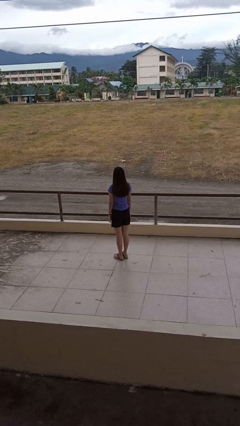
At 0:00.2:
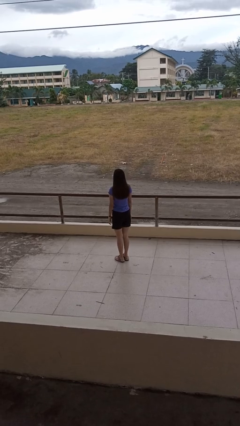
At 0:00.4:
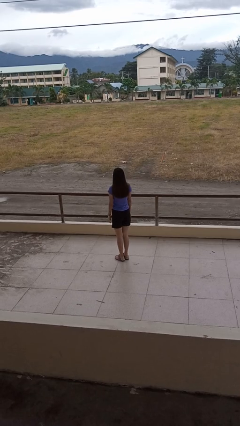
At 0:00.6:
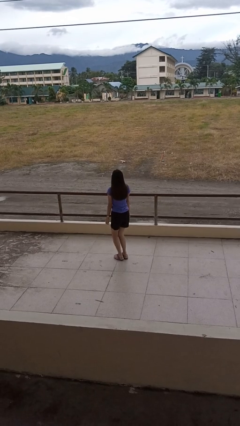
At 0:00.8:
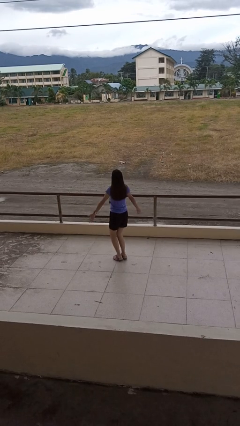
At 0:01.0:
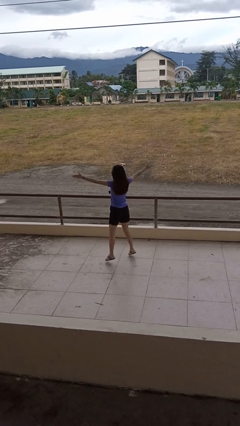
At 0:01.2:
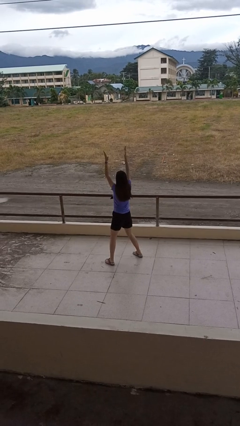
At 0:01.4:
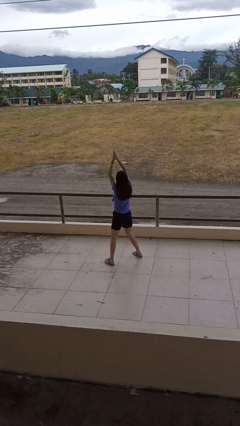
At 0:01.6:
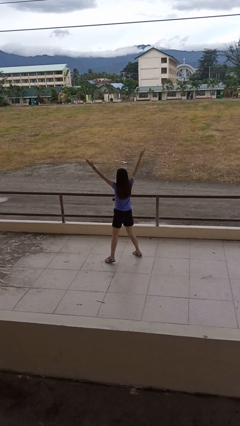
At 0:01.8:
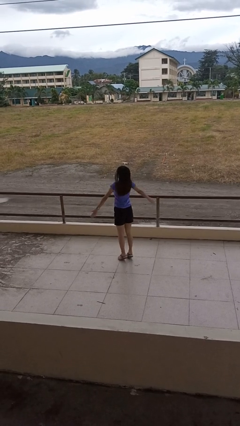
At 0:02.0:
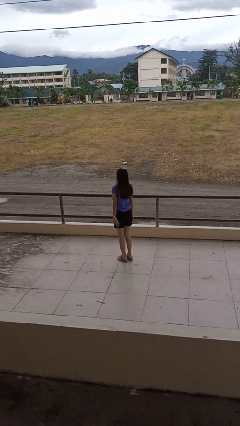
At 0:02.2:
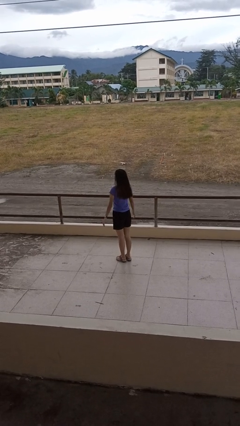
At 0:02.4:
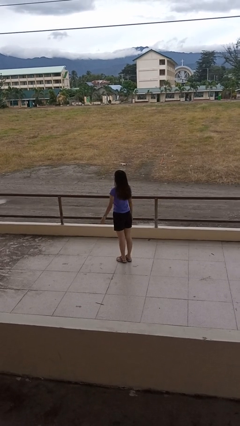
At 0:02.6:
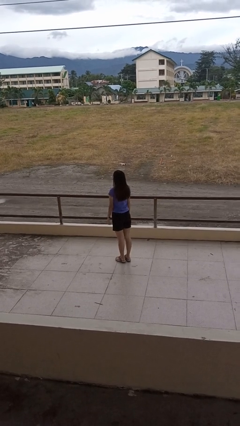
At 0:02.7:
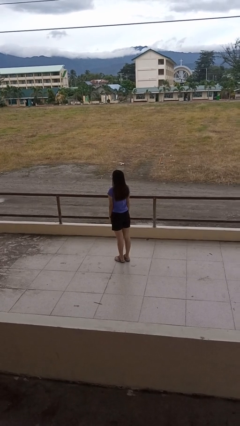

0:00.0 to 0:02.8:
person exercises with jumping jacks

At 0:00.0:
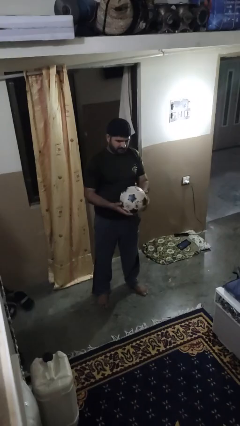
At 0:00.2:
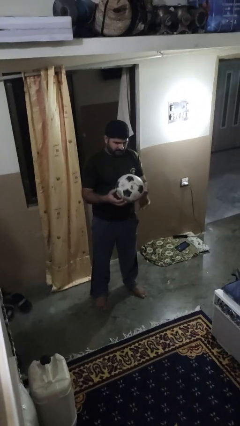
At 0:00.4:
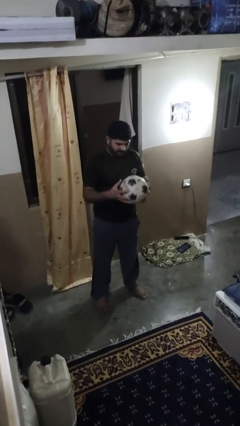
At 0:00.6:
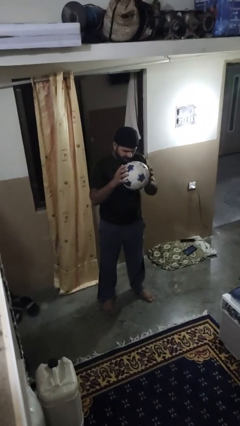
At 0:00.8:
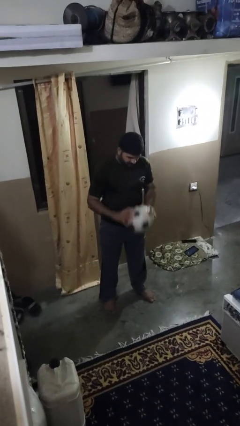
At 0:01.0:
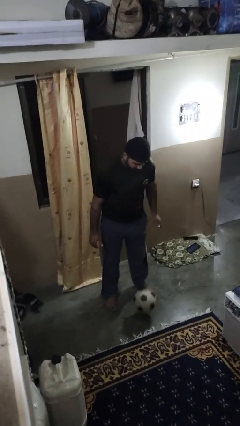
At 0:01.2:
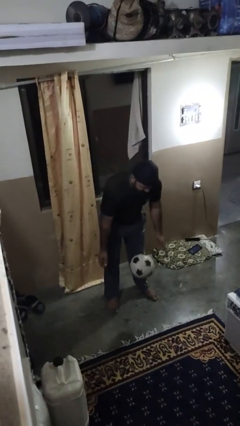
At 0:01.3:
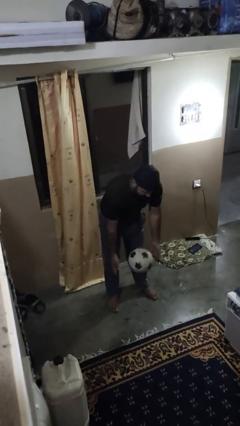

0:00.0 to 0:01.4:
person bounces ball on floor

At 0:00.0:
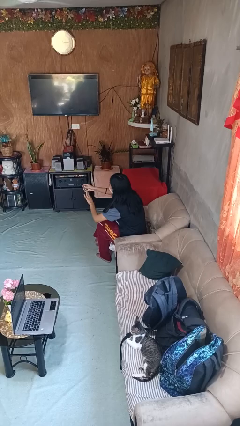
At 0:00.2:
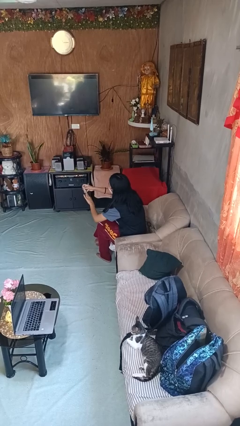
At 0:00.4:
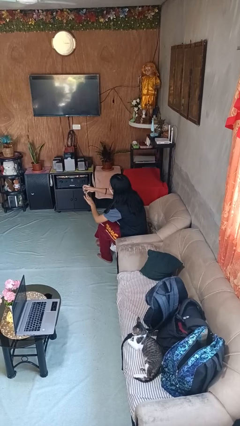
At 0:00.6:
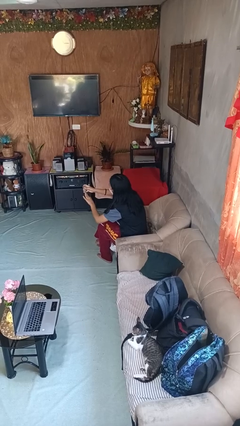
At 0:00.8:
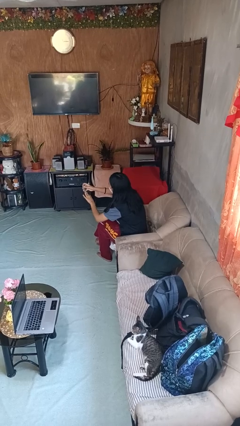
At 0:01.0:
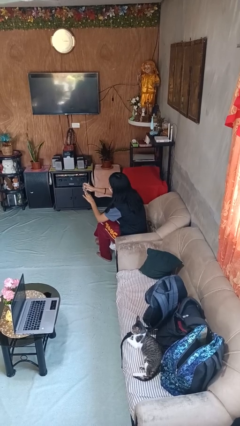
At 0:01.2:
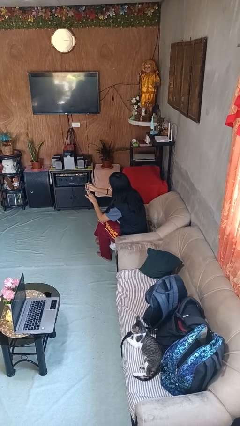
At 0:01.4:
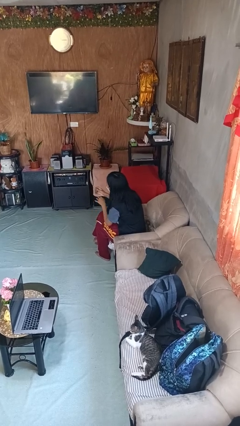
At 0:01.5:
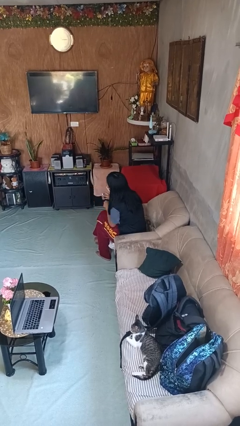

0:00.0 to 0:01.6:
person clips fingernails

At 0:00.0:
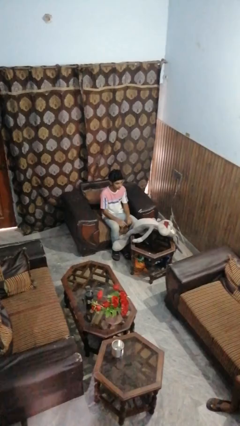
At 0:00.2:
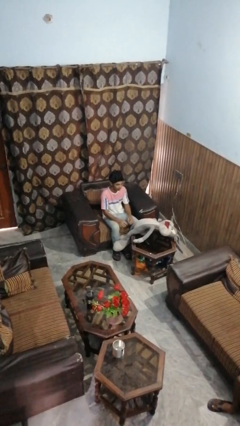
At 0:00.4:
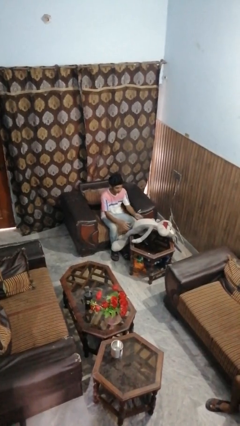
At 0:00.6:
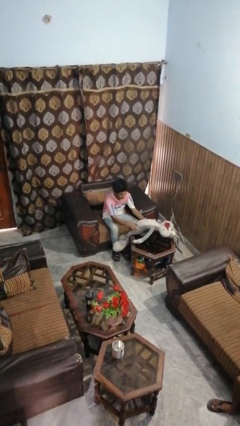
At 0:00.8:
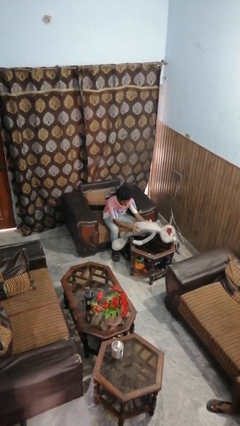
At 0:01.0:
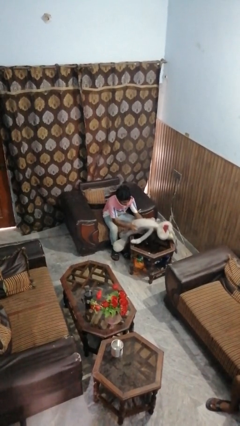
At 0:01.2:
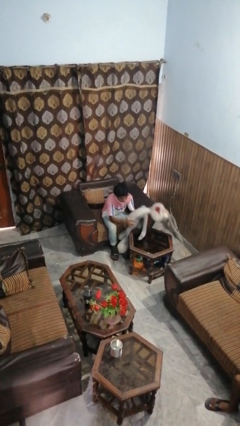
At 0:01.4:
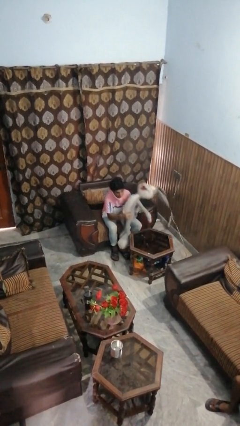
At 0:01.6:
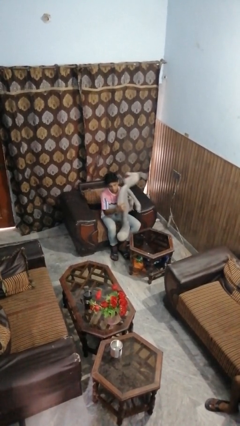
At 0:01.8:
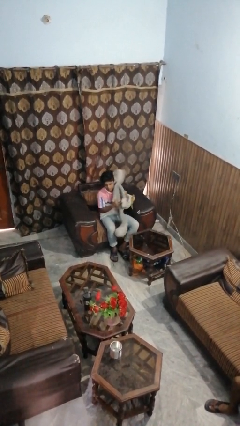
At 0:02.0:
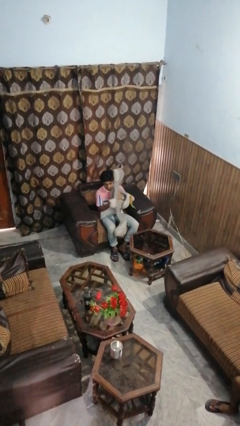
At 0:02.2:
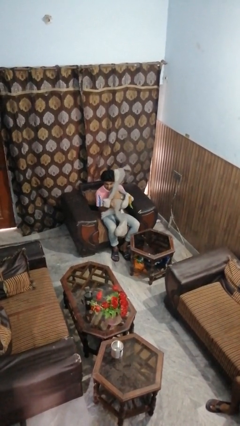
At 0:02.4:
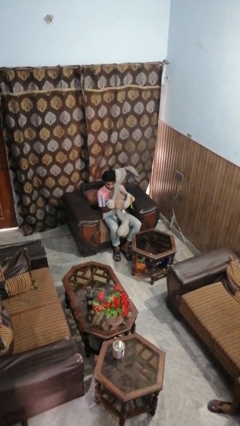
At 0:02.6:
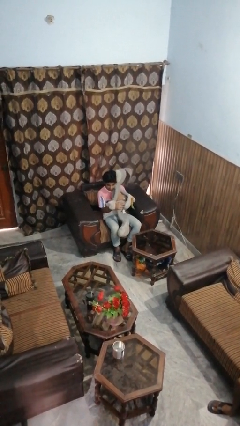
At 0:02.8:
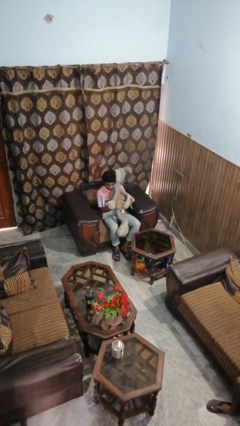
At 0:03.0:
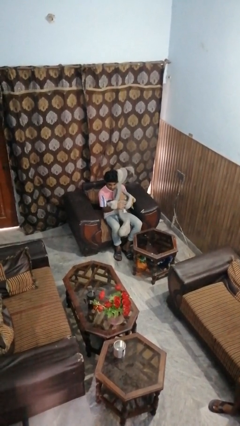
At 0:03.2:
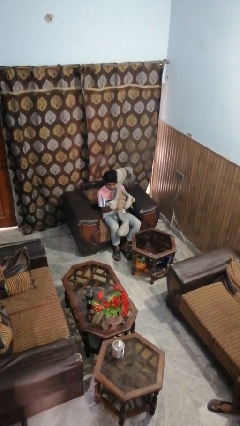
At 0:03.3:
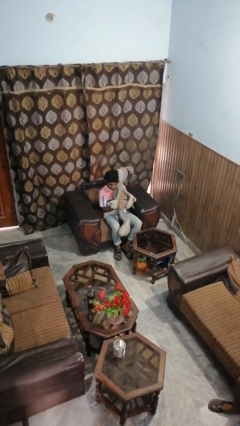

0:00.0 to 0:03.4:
person hugs stuffed animal

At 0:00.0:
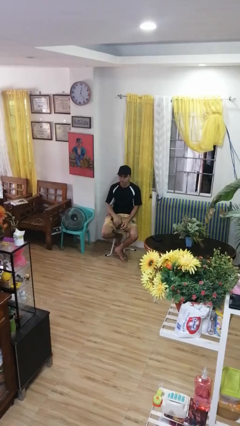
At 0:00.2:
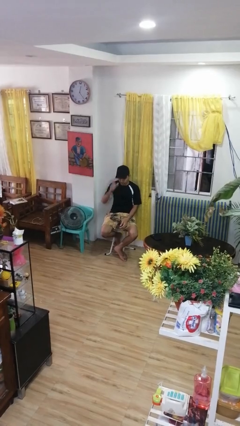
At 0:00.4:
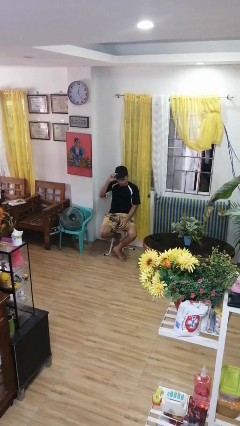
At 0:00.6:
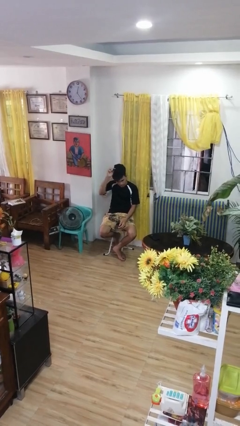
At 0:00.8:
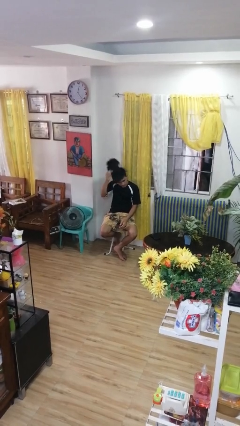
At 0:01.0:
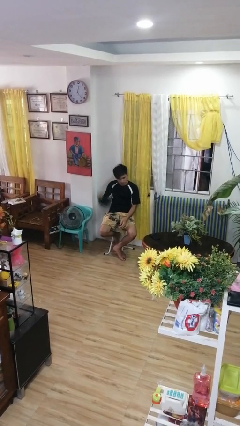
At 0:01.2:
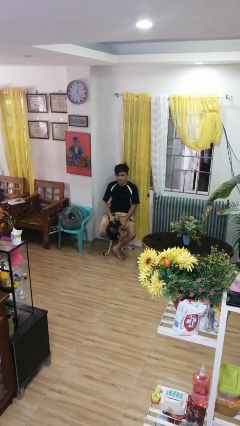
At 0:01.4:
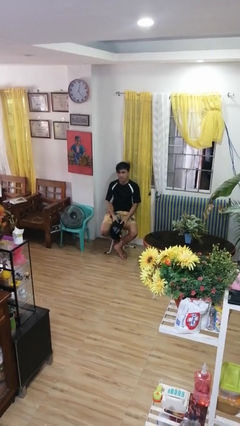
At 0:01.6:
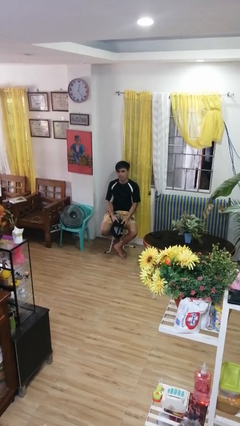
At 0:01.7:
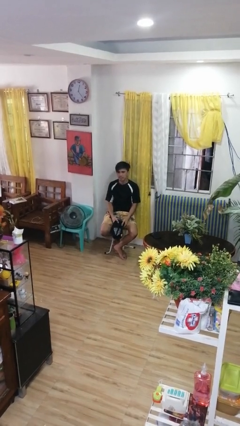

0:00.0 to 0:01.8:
person takes off hat

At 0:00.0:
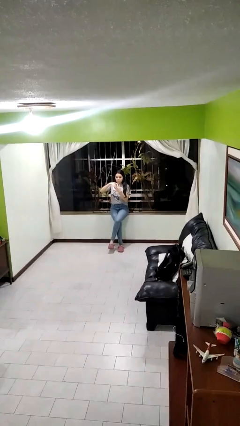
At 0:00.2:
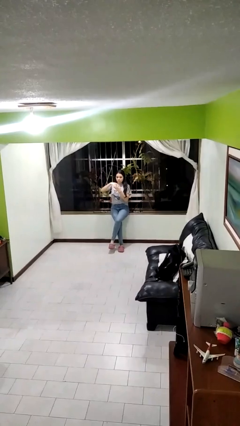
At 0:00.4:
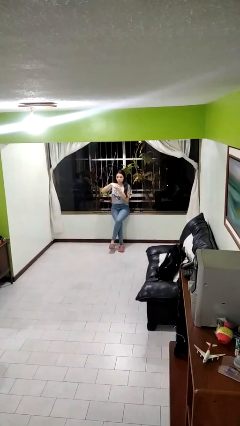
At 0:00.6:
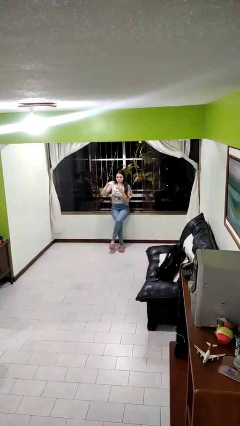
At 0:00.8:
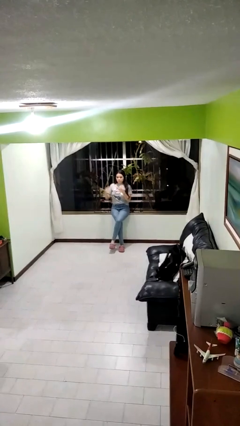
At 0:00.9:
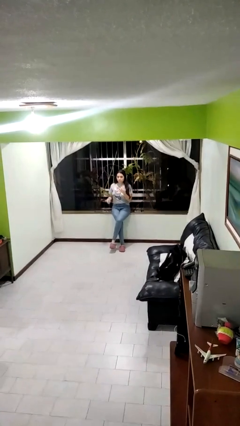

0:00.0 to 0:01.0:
person puts on ring

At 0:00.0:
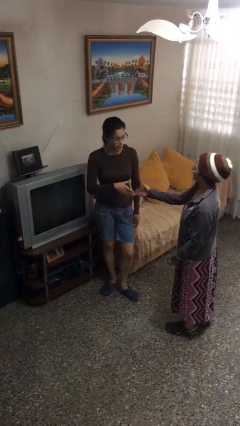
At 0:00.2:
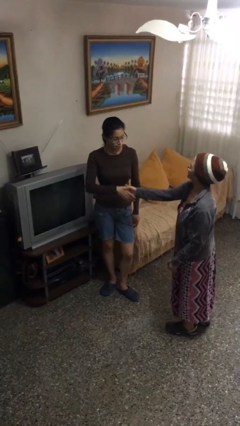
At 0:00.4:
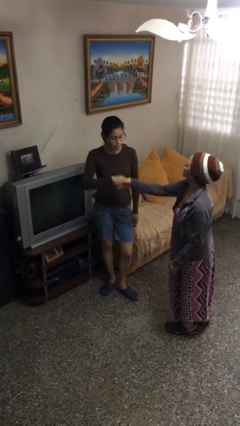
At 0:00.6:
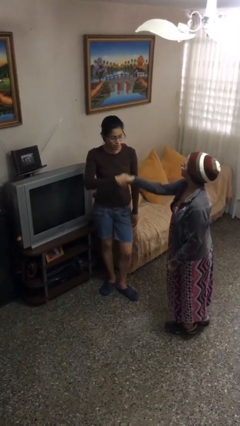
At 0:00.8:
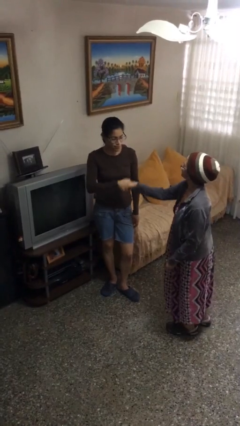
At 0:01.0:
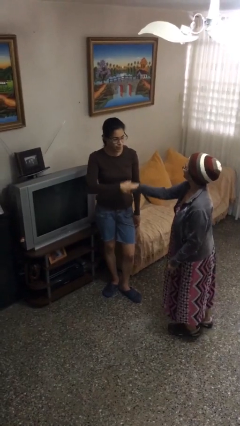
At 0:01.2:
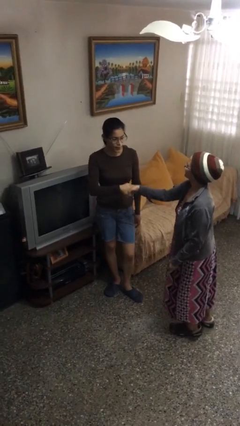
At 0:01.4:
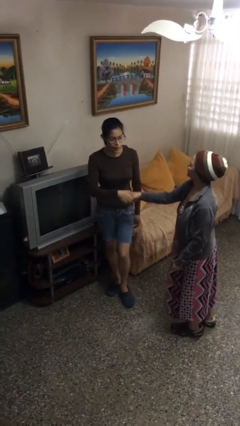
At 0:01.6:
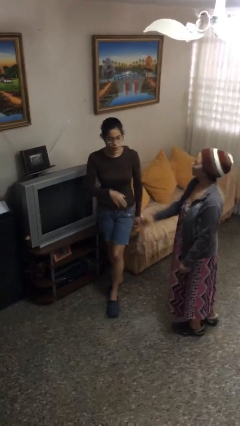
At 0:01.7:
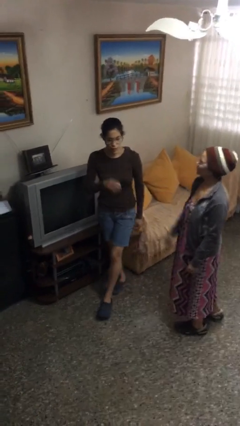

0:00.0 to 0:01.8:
person shakes hand

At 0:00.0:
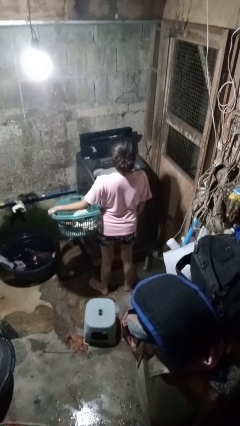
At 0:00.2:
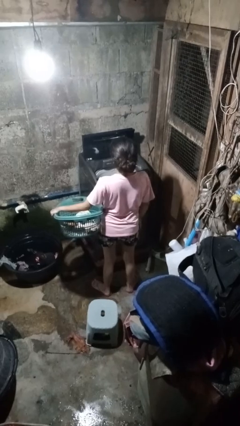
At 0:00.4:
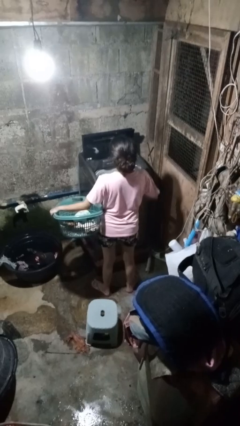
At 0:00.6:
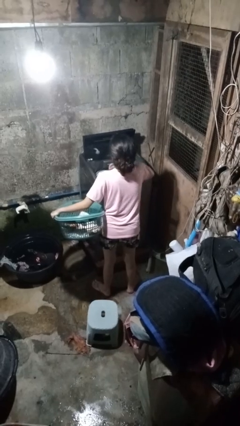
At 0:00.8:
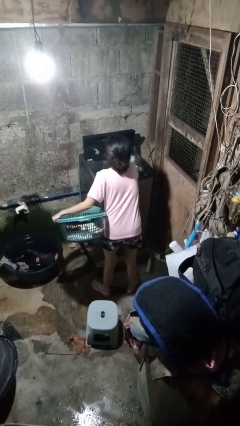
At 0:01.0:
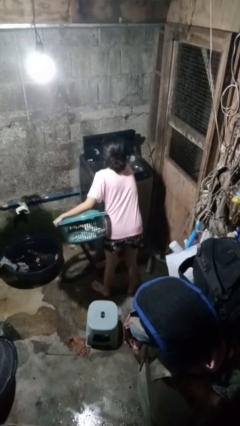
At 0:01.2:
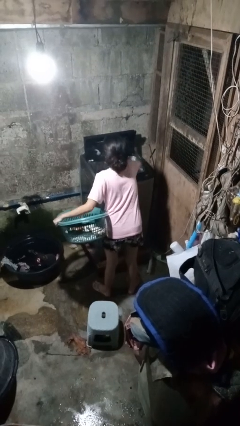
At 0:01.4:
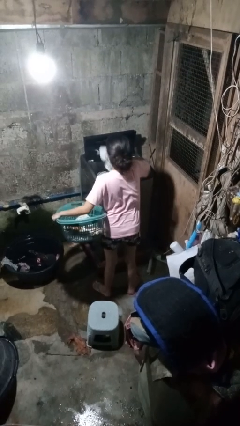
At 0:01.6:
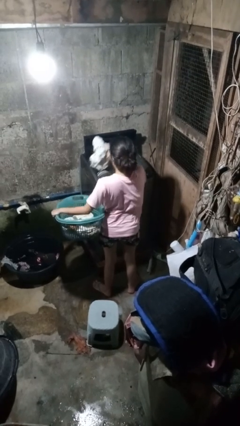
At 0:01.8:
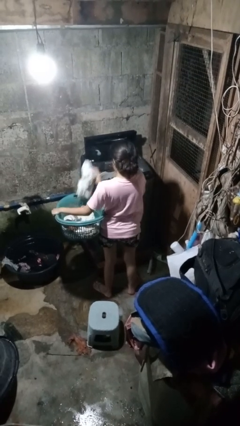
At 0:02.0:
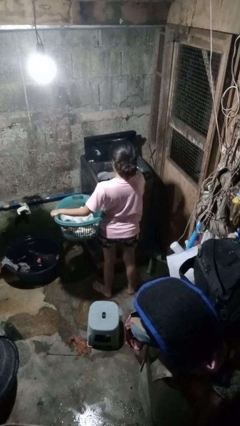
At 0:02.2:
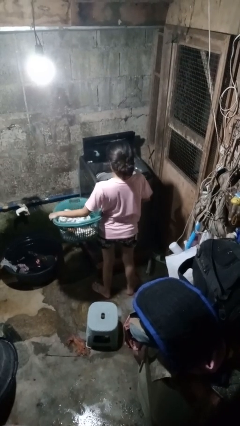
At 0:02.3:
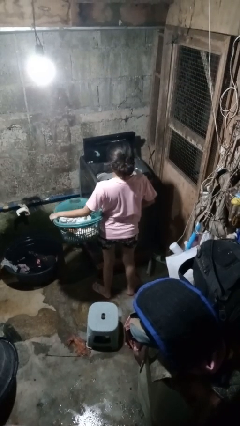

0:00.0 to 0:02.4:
person unloads dryer

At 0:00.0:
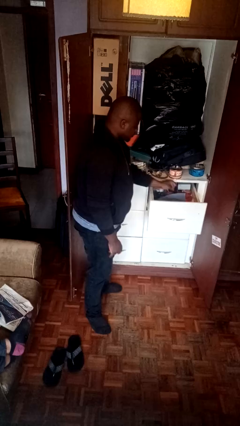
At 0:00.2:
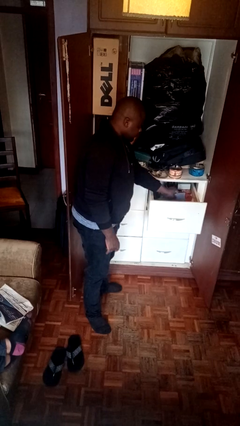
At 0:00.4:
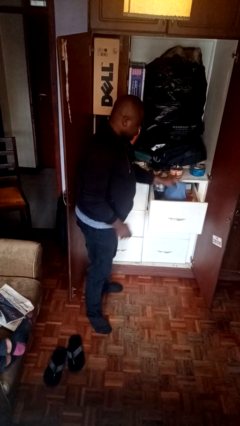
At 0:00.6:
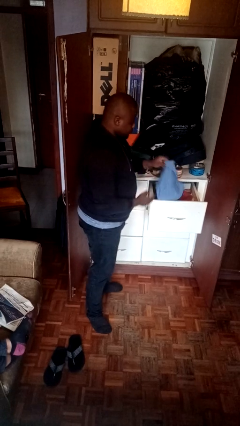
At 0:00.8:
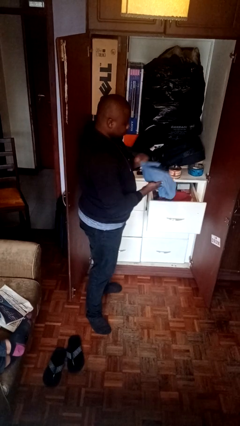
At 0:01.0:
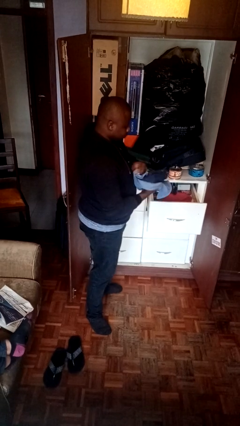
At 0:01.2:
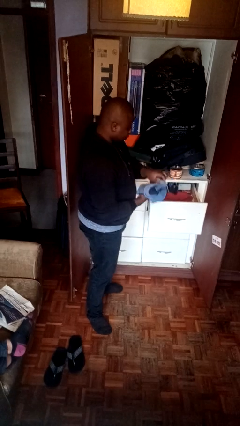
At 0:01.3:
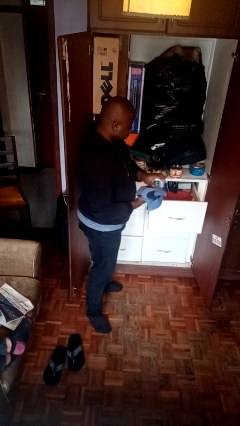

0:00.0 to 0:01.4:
person takes clothes from dresser
